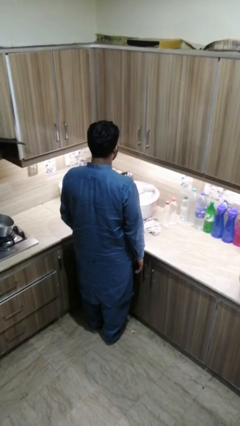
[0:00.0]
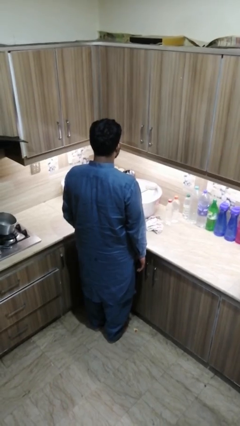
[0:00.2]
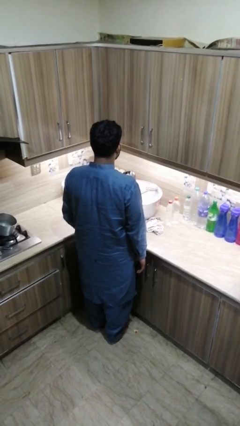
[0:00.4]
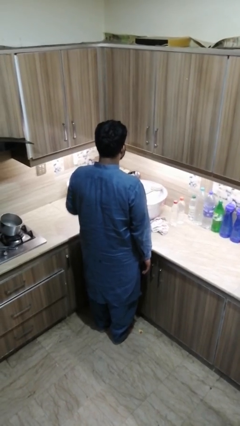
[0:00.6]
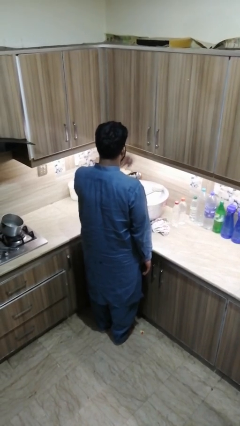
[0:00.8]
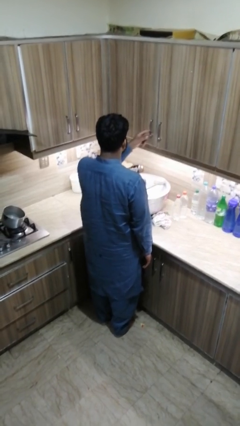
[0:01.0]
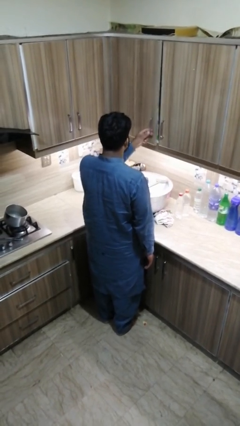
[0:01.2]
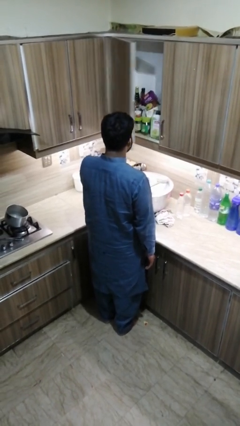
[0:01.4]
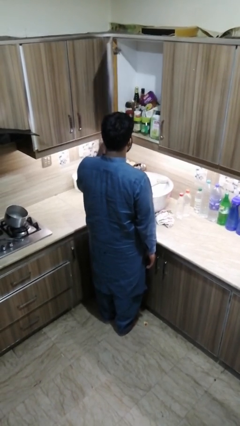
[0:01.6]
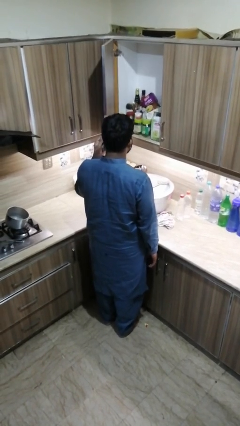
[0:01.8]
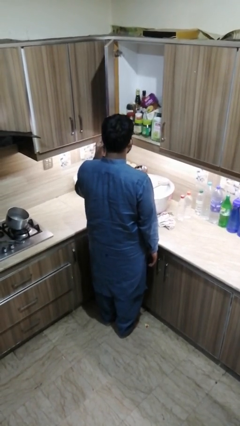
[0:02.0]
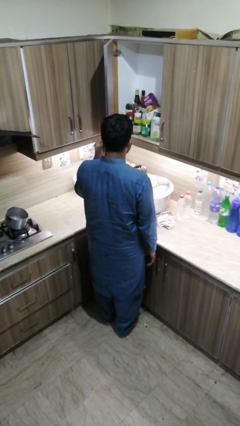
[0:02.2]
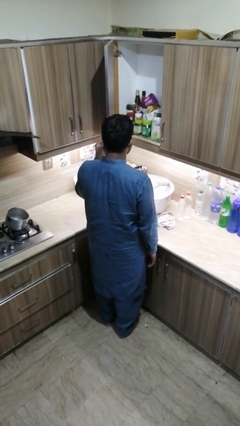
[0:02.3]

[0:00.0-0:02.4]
person opens kitchen drawer

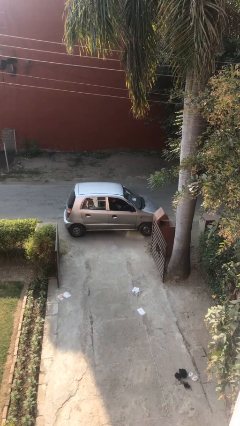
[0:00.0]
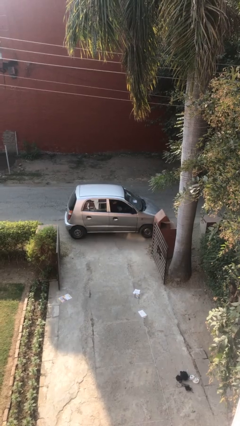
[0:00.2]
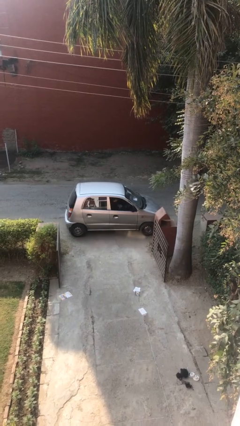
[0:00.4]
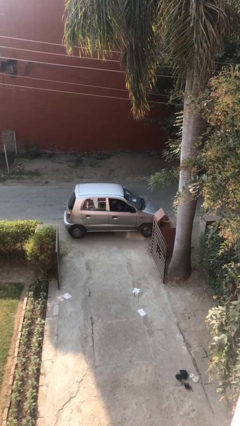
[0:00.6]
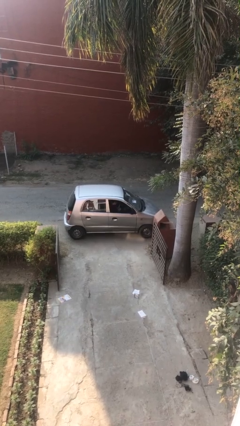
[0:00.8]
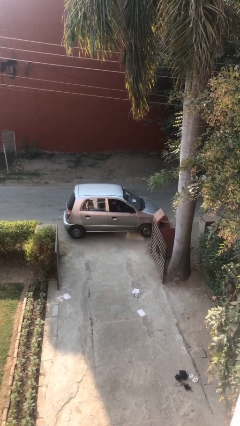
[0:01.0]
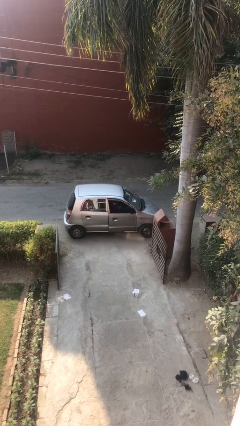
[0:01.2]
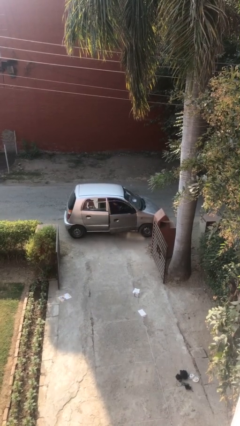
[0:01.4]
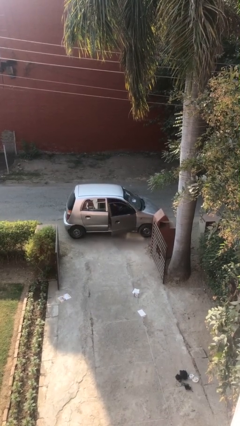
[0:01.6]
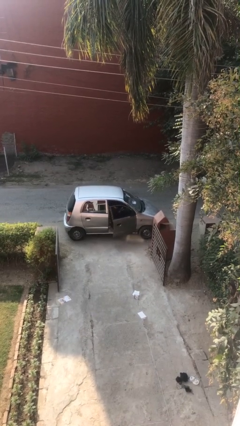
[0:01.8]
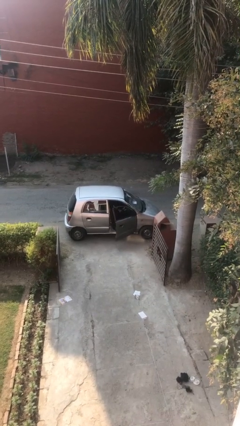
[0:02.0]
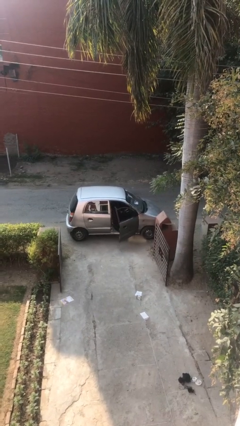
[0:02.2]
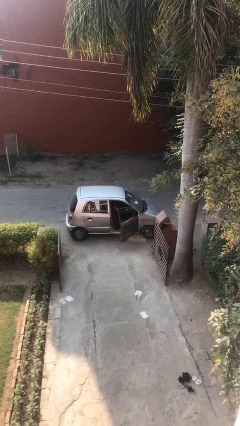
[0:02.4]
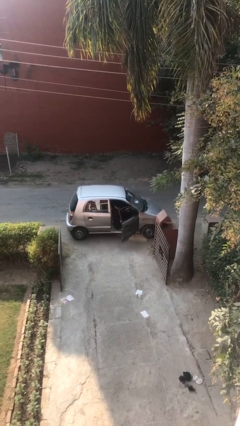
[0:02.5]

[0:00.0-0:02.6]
person opens car door

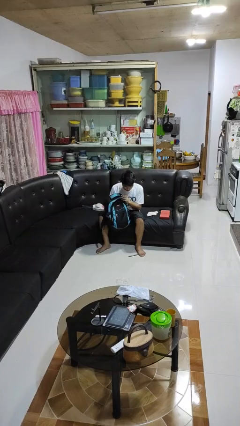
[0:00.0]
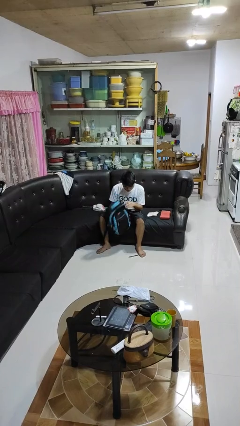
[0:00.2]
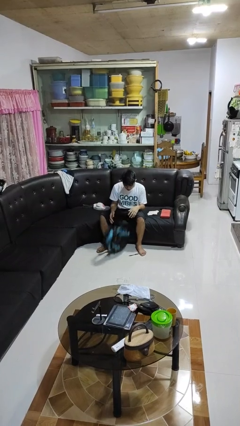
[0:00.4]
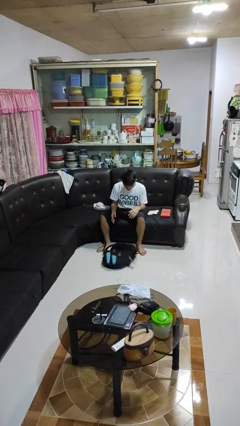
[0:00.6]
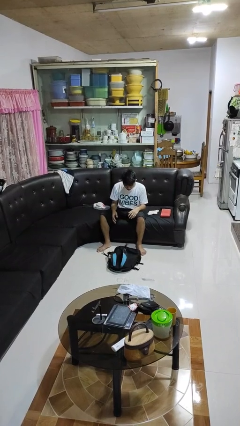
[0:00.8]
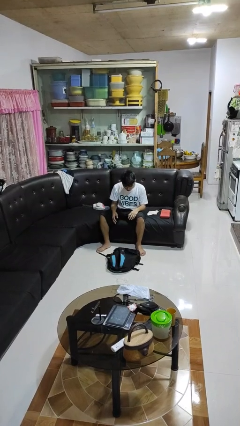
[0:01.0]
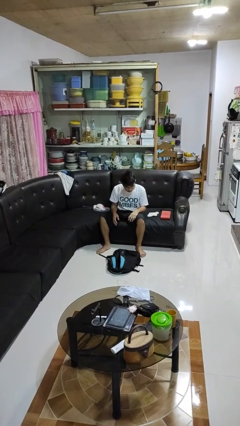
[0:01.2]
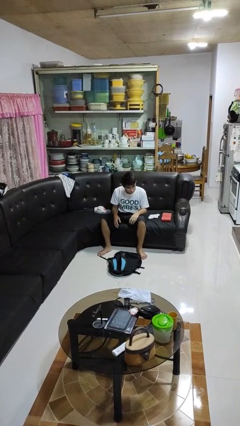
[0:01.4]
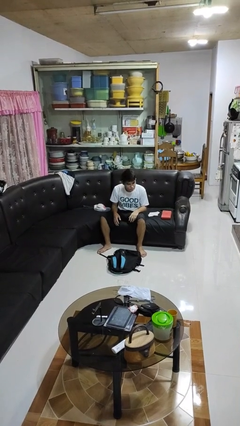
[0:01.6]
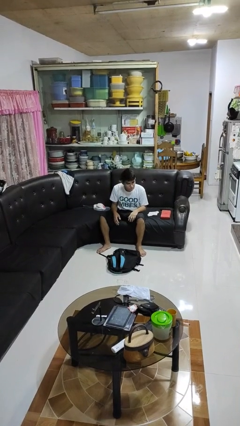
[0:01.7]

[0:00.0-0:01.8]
person drops object

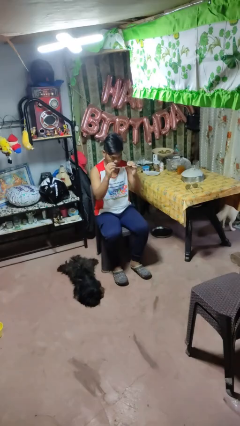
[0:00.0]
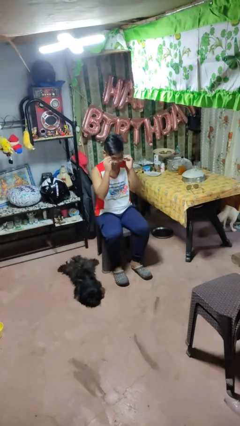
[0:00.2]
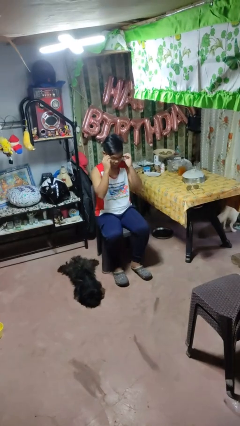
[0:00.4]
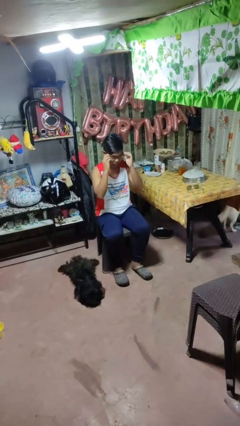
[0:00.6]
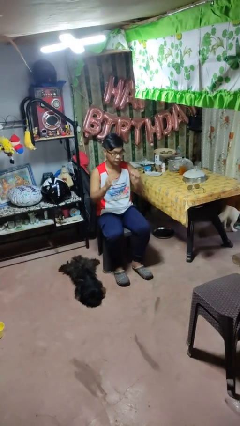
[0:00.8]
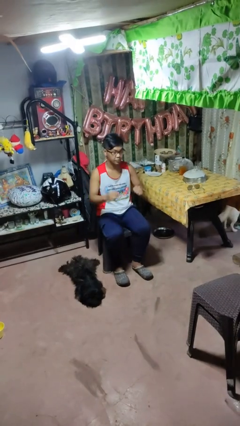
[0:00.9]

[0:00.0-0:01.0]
person puts on glasses

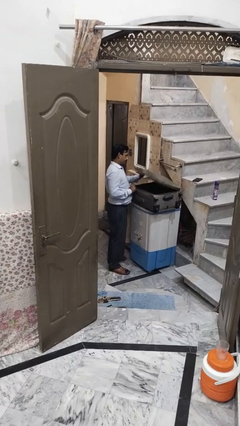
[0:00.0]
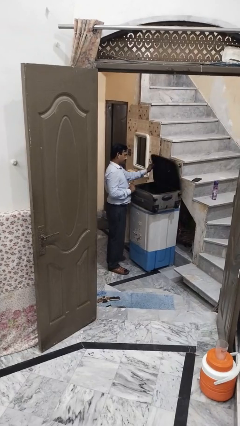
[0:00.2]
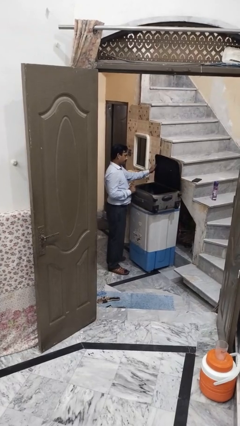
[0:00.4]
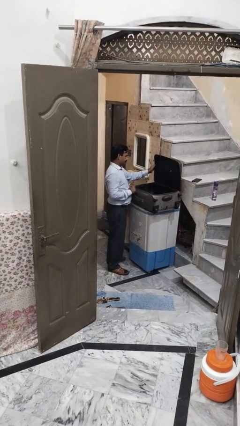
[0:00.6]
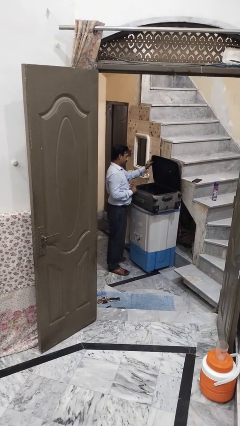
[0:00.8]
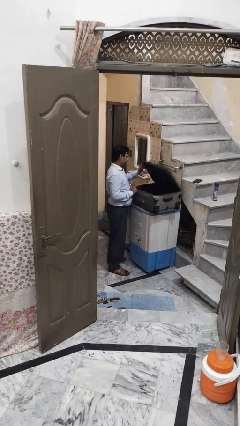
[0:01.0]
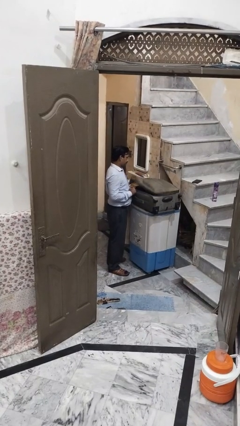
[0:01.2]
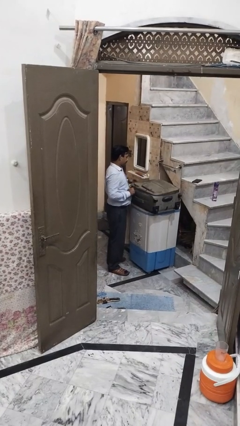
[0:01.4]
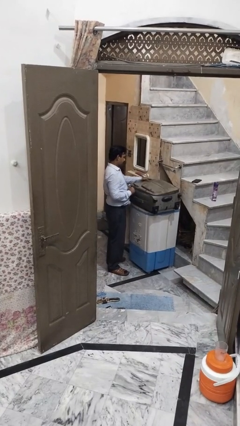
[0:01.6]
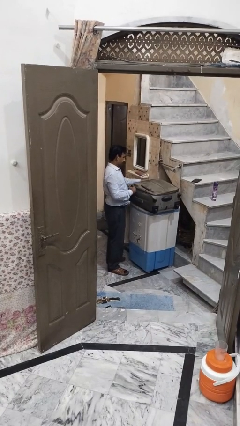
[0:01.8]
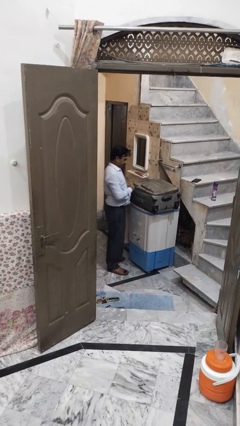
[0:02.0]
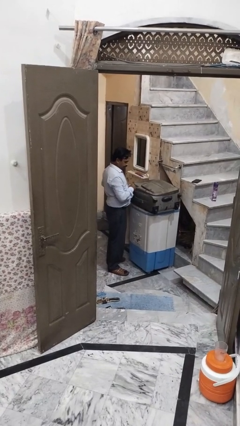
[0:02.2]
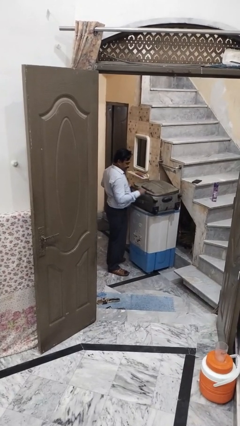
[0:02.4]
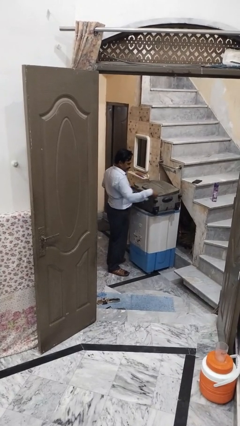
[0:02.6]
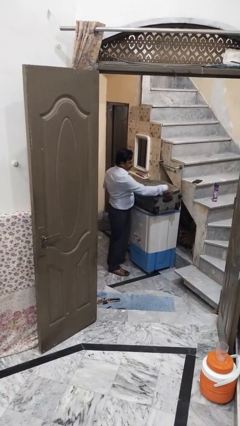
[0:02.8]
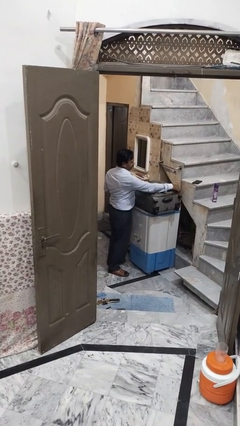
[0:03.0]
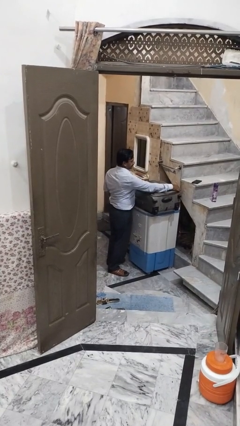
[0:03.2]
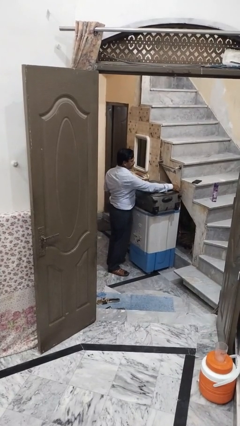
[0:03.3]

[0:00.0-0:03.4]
person closes suitcase

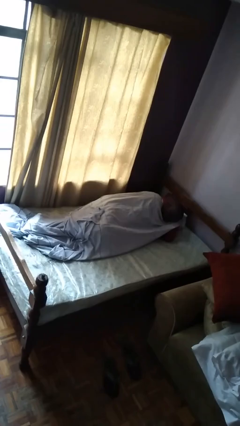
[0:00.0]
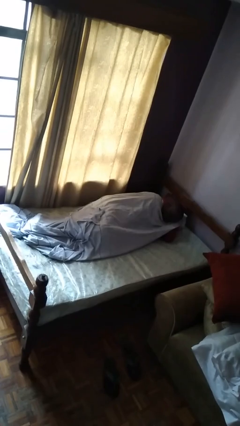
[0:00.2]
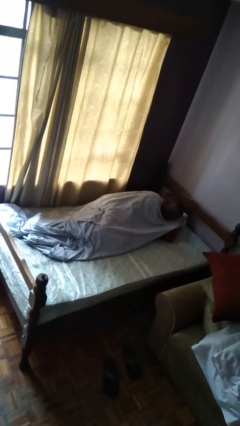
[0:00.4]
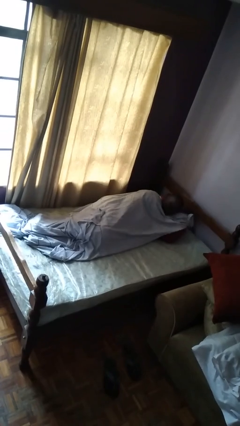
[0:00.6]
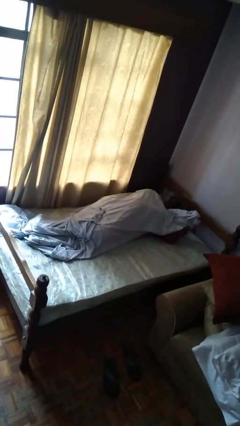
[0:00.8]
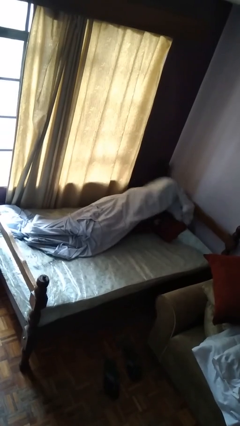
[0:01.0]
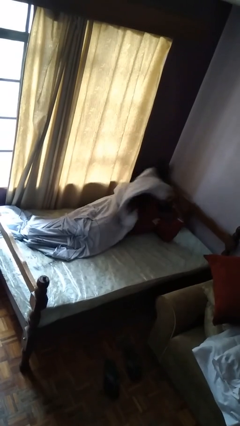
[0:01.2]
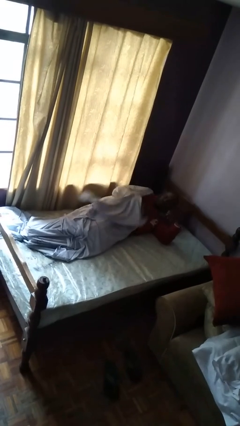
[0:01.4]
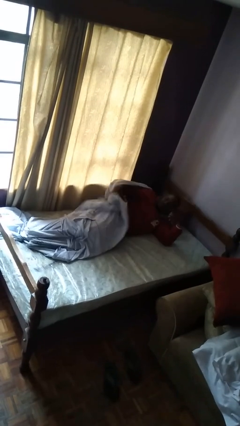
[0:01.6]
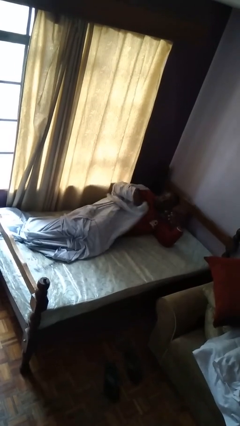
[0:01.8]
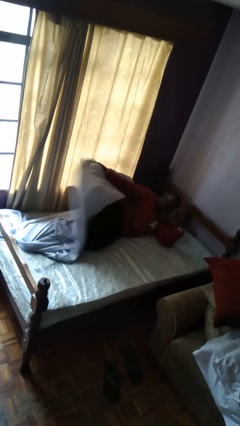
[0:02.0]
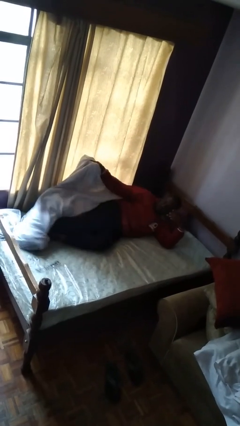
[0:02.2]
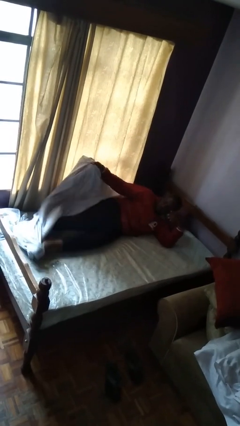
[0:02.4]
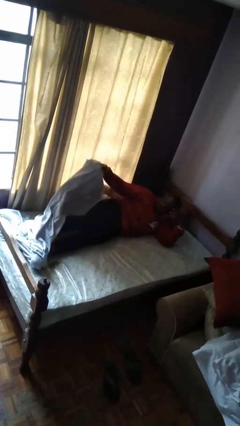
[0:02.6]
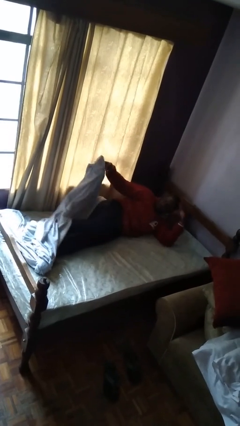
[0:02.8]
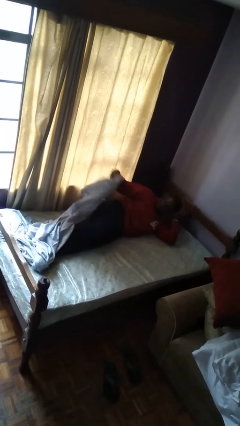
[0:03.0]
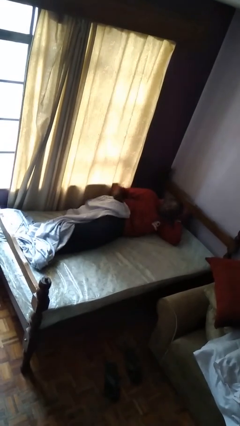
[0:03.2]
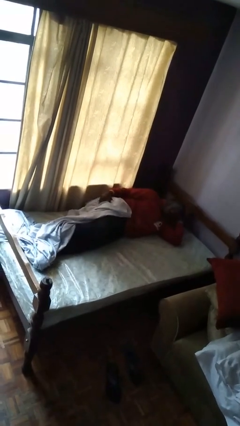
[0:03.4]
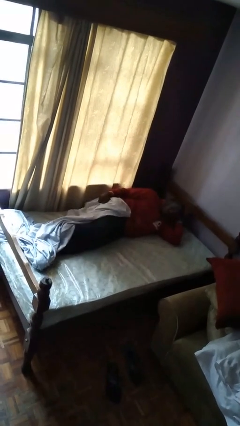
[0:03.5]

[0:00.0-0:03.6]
person uncovers with bedsheets

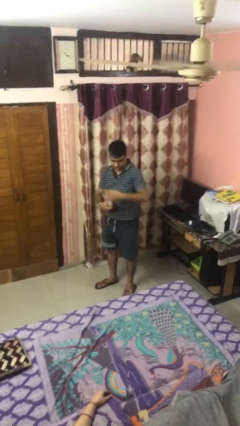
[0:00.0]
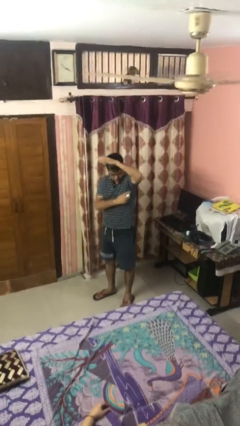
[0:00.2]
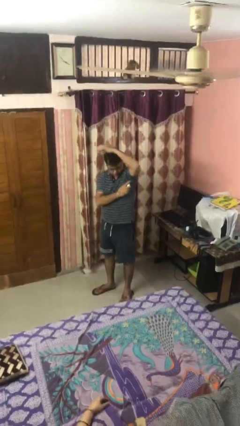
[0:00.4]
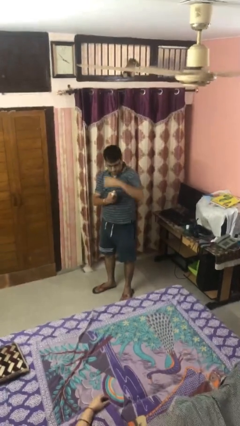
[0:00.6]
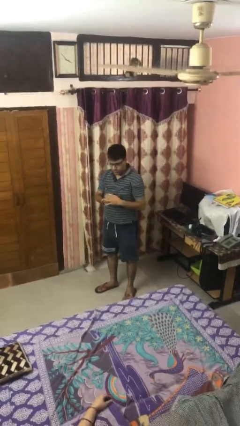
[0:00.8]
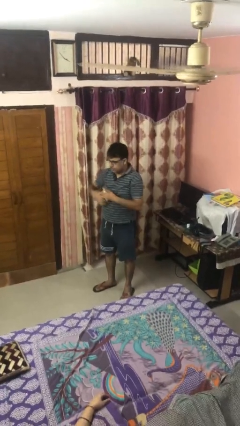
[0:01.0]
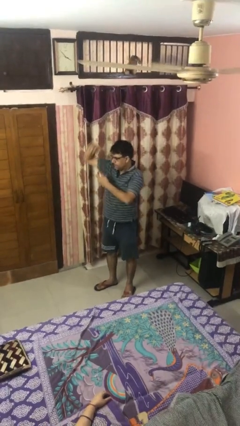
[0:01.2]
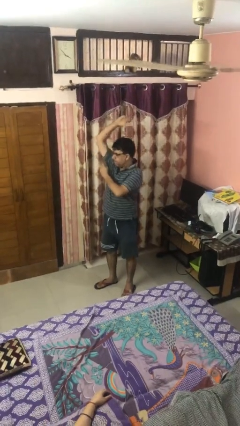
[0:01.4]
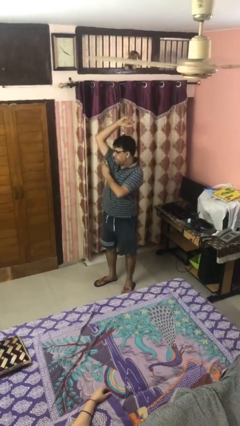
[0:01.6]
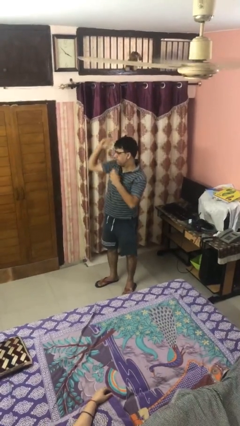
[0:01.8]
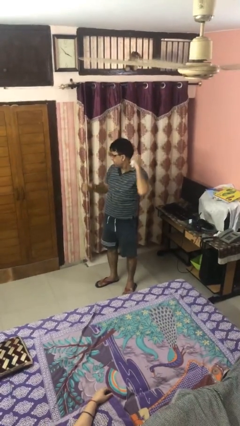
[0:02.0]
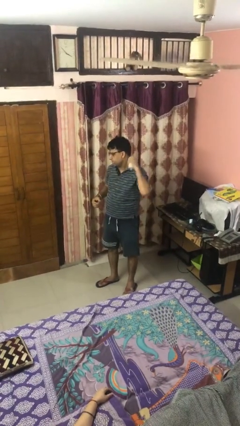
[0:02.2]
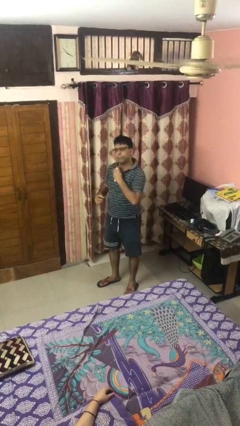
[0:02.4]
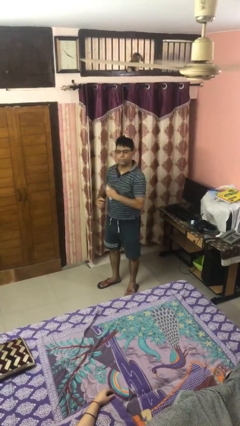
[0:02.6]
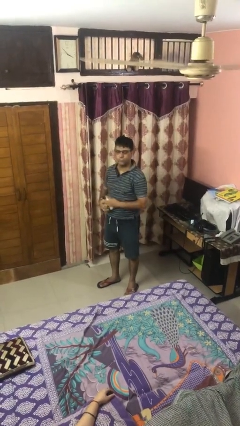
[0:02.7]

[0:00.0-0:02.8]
person applies deodorant
